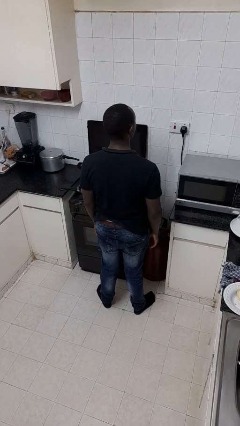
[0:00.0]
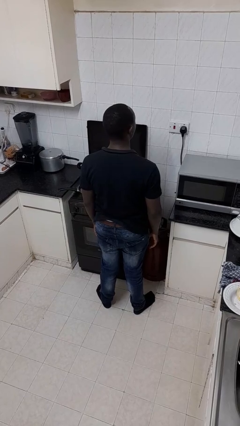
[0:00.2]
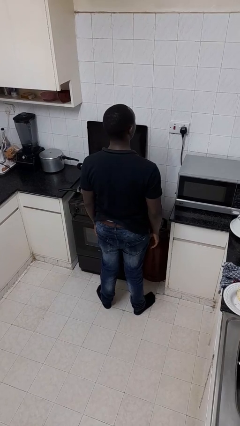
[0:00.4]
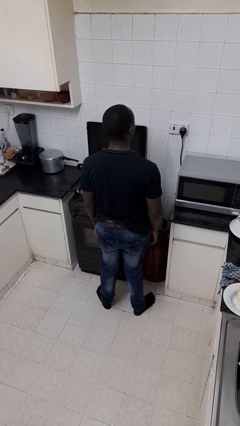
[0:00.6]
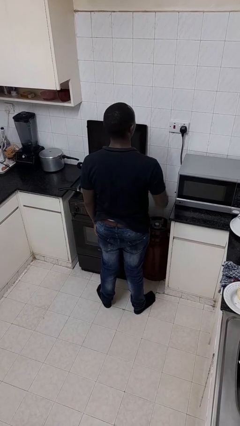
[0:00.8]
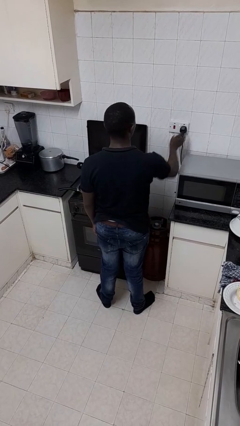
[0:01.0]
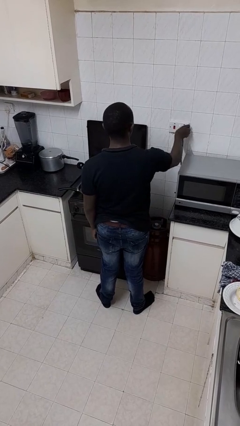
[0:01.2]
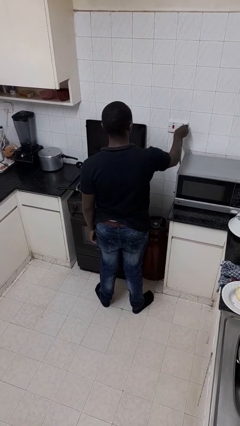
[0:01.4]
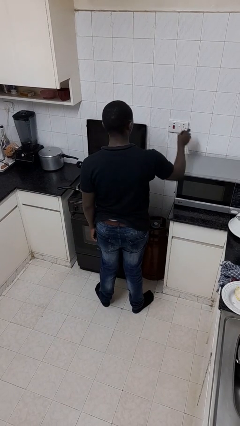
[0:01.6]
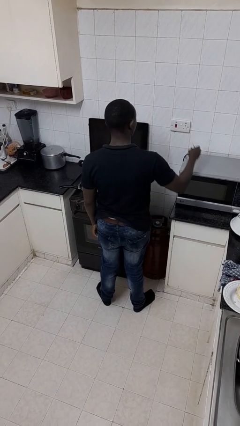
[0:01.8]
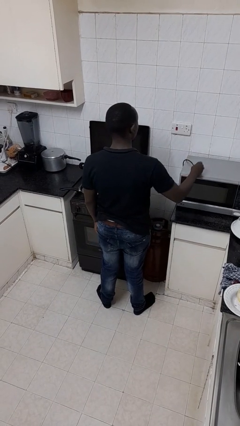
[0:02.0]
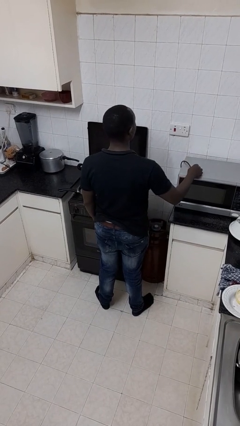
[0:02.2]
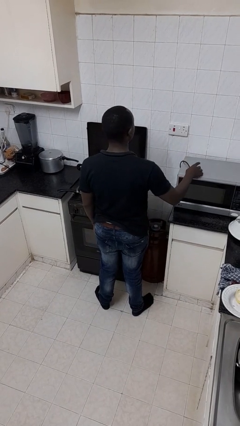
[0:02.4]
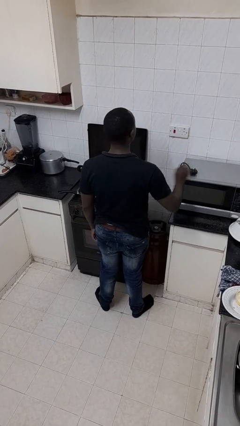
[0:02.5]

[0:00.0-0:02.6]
person unplugs from electrical socket

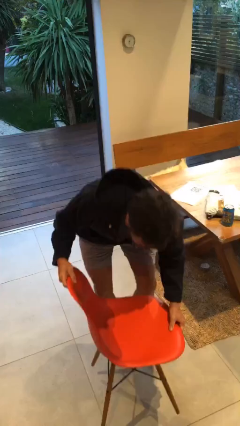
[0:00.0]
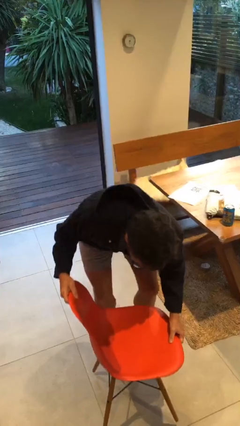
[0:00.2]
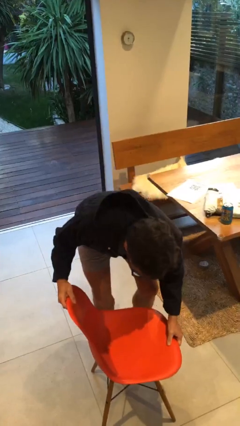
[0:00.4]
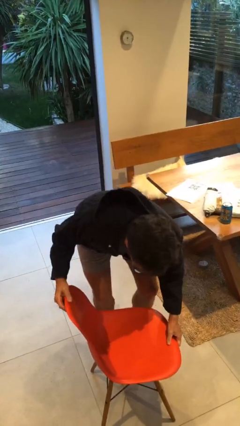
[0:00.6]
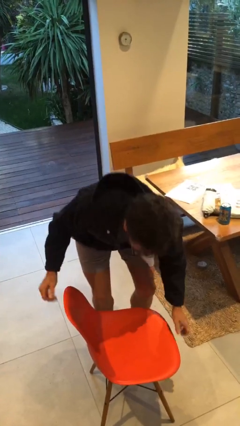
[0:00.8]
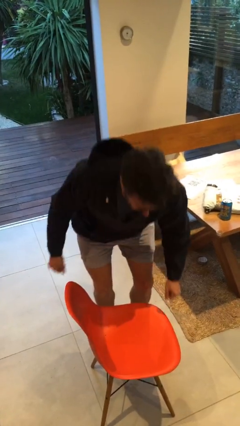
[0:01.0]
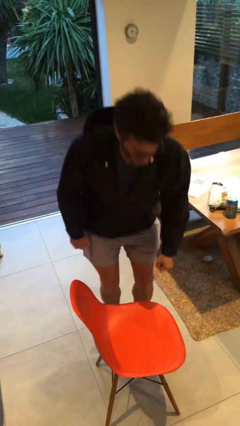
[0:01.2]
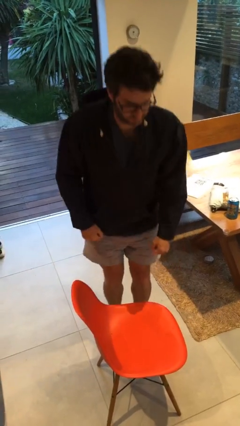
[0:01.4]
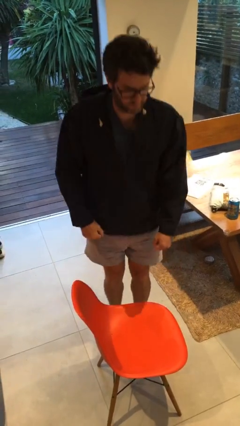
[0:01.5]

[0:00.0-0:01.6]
person puts down object on floor

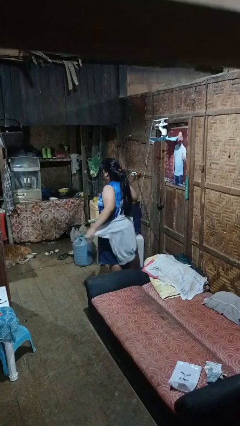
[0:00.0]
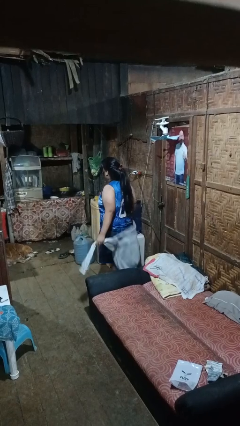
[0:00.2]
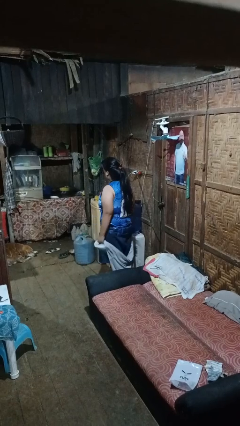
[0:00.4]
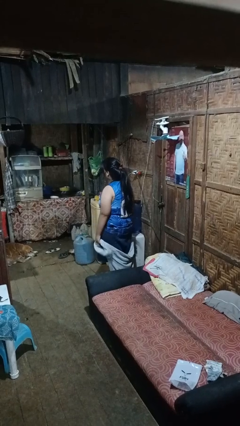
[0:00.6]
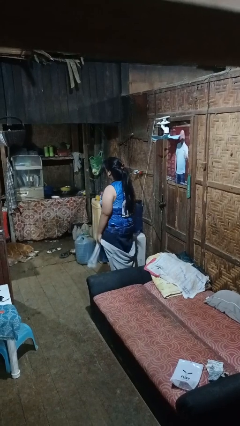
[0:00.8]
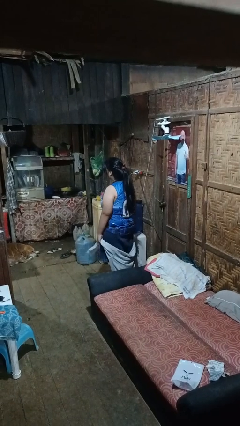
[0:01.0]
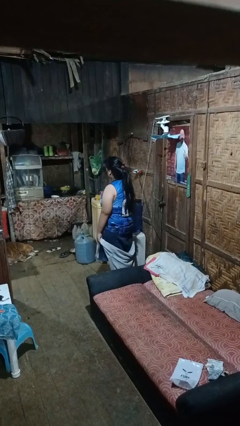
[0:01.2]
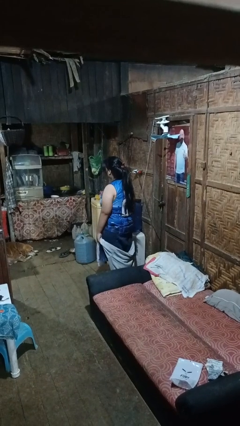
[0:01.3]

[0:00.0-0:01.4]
person unties jacket around waist

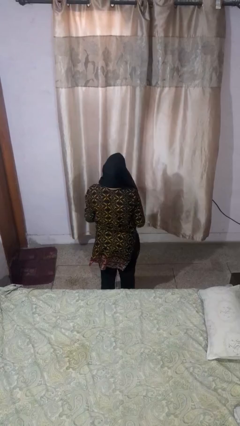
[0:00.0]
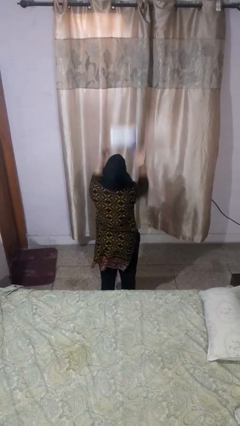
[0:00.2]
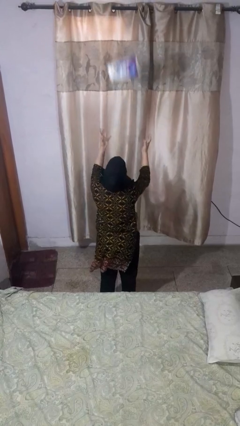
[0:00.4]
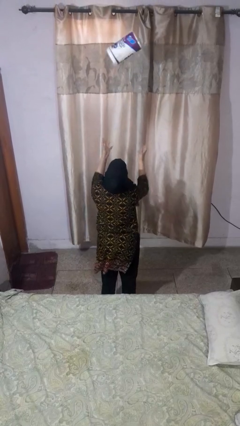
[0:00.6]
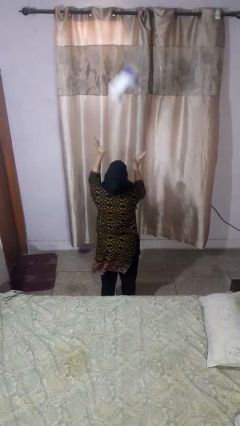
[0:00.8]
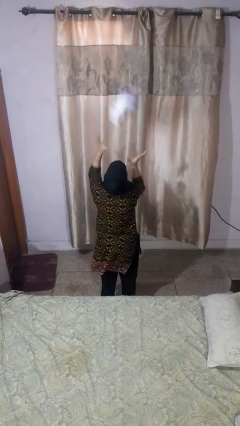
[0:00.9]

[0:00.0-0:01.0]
person drops object

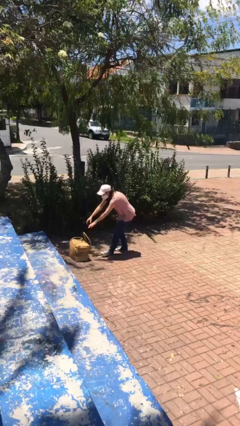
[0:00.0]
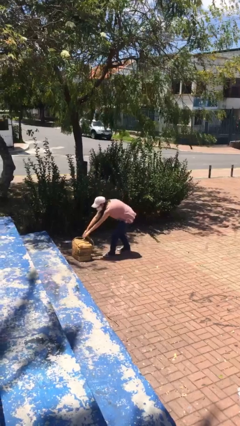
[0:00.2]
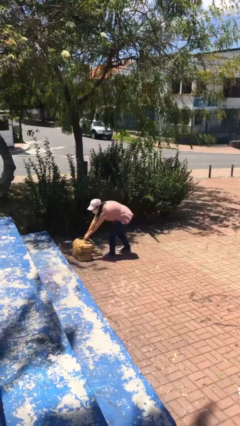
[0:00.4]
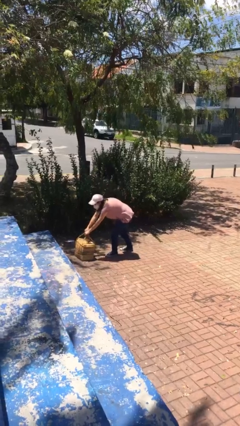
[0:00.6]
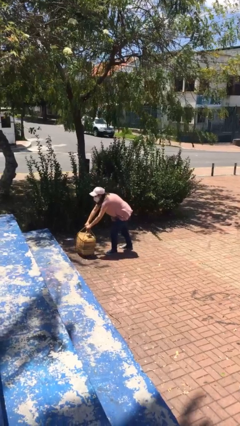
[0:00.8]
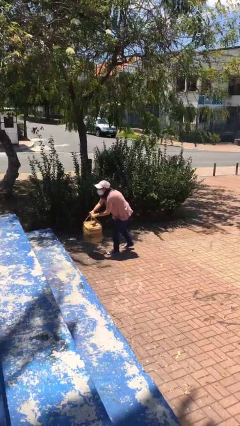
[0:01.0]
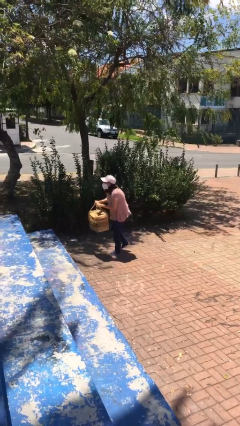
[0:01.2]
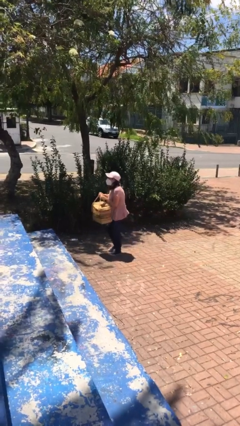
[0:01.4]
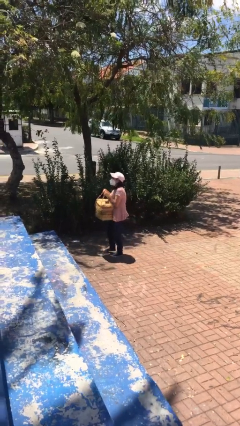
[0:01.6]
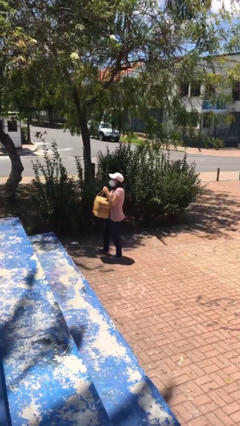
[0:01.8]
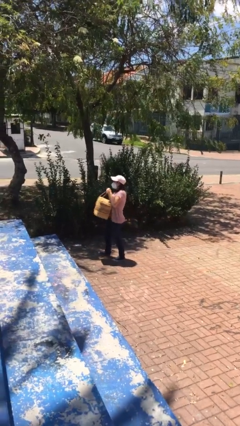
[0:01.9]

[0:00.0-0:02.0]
person picks up object from floor

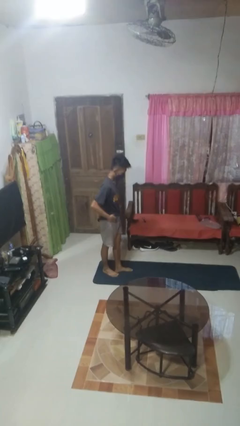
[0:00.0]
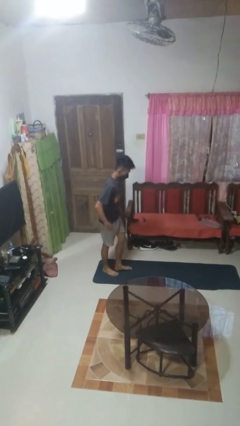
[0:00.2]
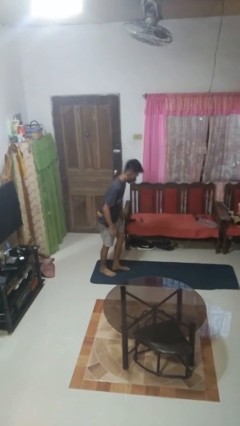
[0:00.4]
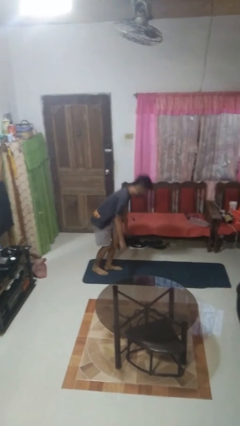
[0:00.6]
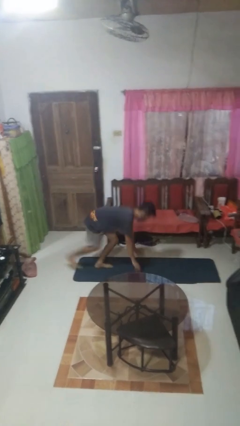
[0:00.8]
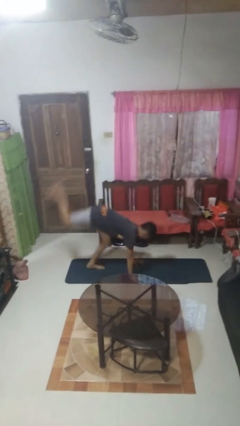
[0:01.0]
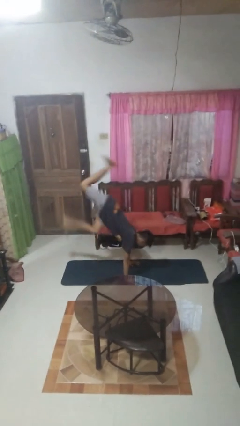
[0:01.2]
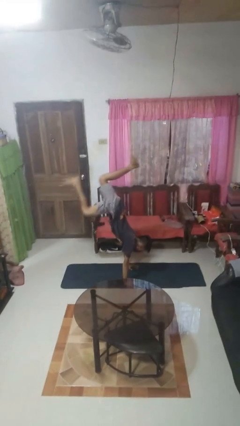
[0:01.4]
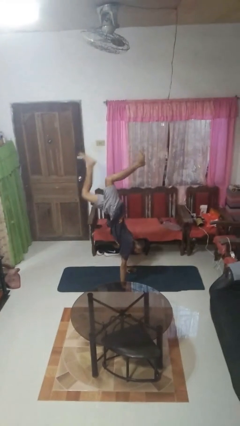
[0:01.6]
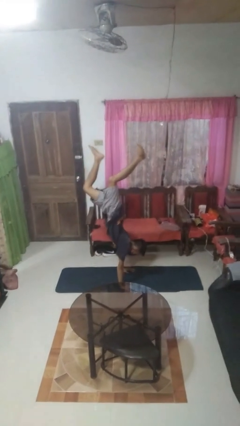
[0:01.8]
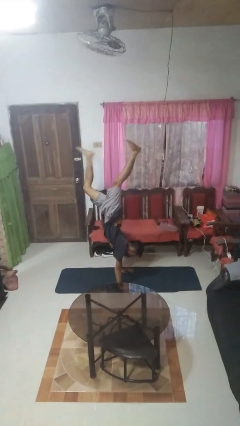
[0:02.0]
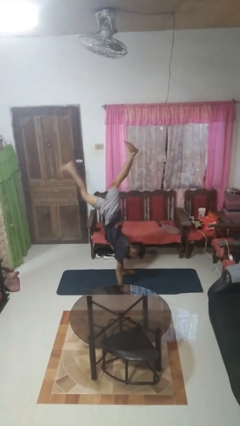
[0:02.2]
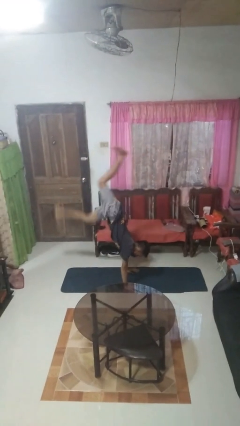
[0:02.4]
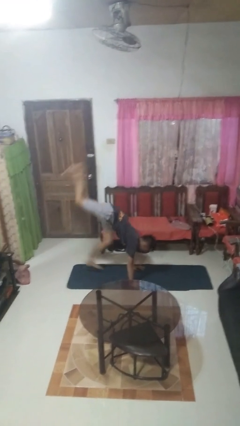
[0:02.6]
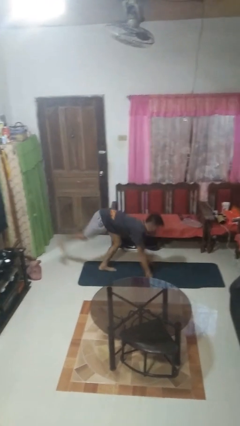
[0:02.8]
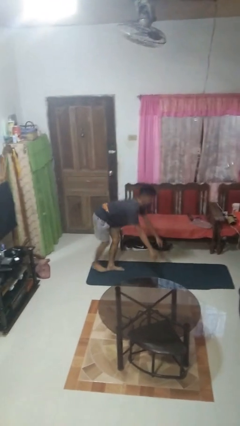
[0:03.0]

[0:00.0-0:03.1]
person handstand

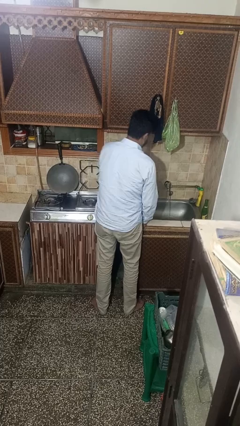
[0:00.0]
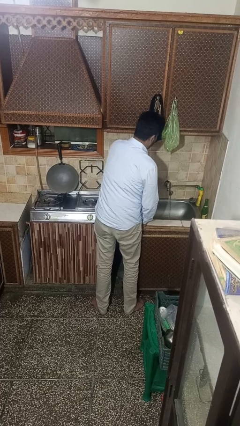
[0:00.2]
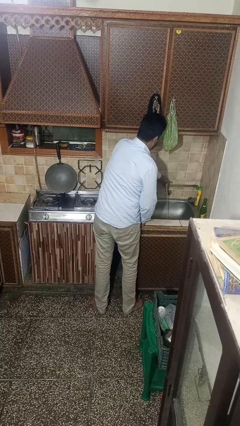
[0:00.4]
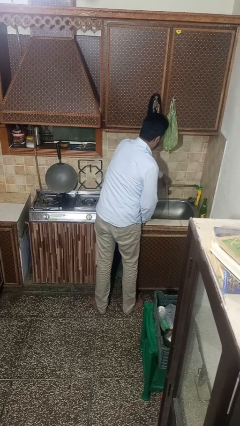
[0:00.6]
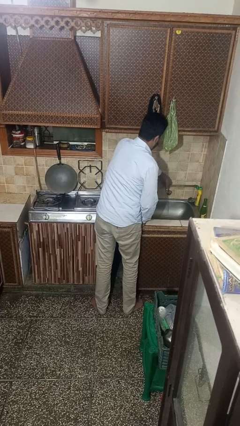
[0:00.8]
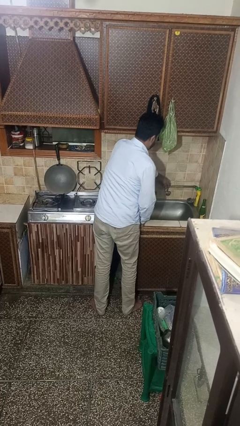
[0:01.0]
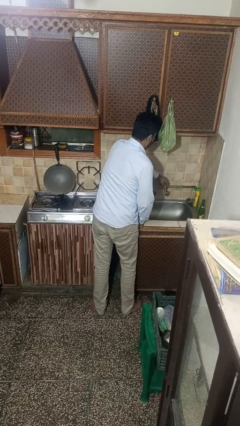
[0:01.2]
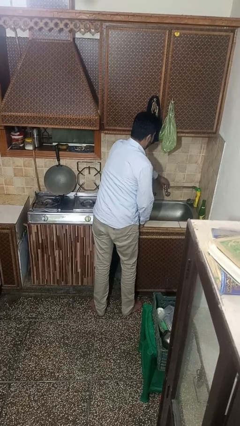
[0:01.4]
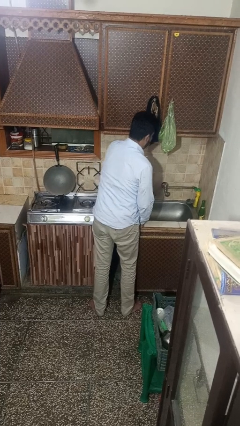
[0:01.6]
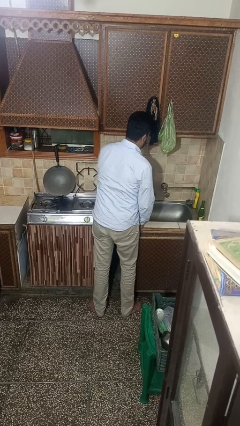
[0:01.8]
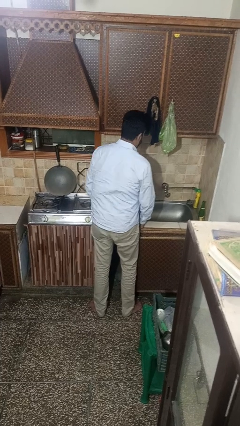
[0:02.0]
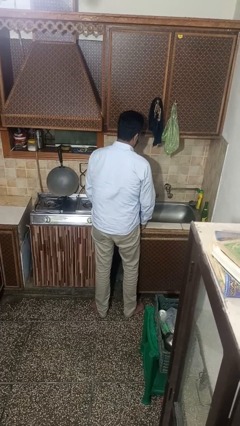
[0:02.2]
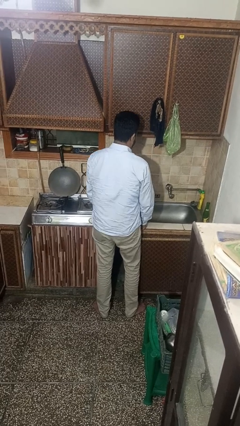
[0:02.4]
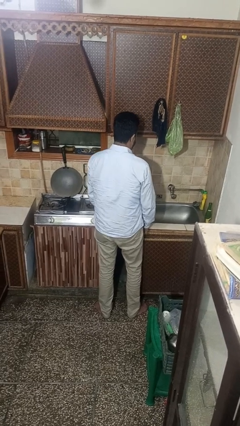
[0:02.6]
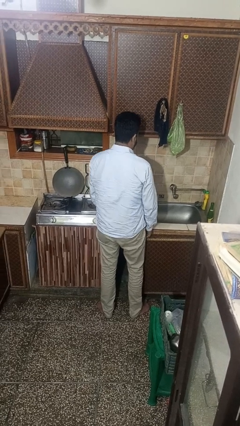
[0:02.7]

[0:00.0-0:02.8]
person turns off faucet

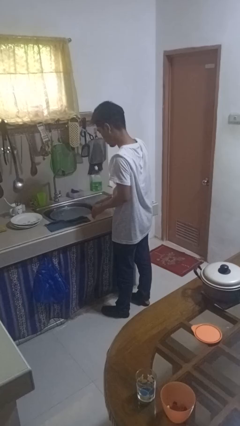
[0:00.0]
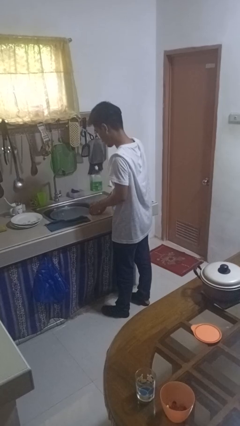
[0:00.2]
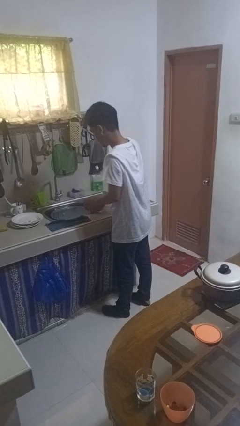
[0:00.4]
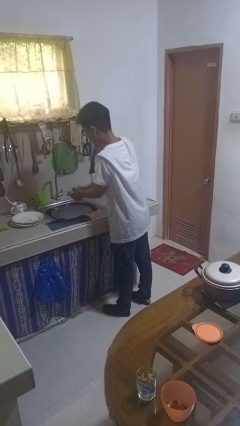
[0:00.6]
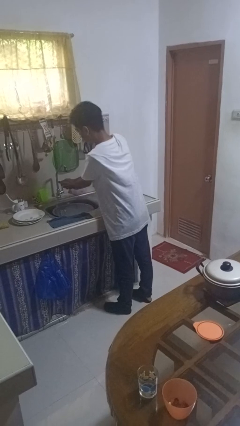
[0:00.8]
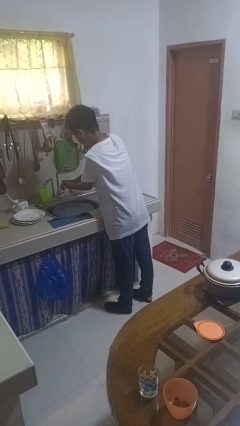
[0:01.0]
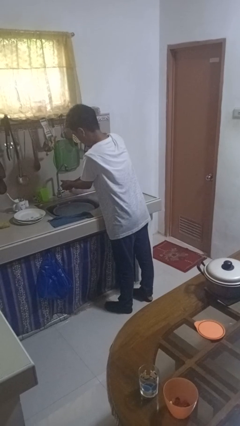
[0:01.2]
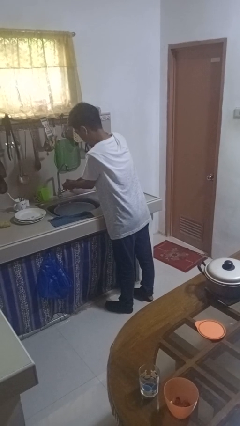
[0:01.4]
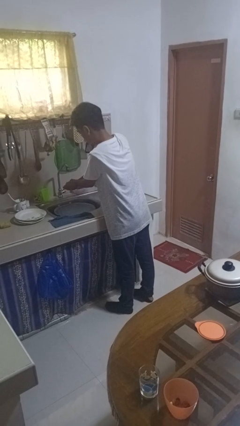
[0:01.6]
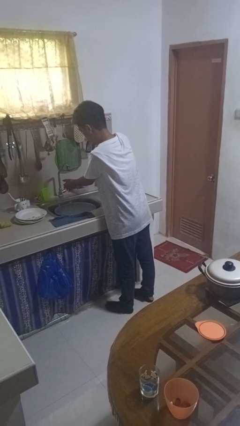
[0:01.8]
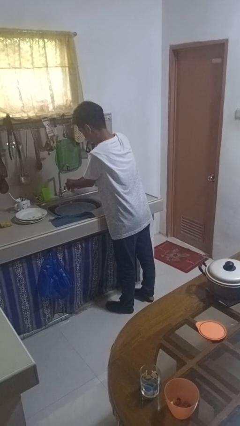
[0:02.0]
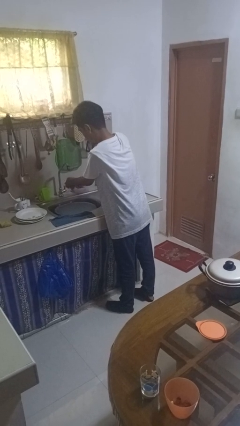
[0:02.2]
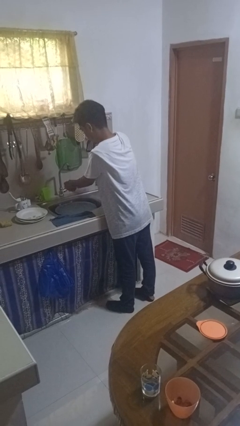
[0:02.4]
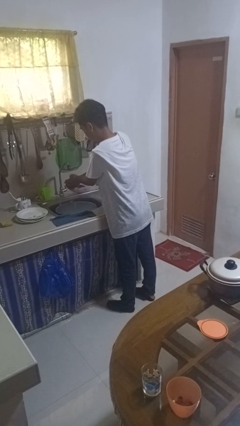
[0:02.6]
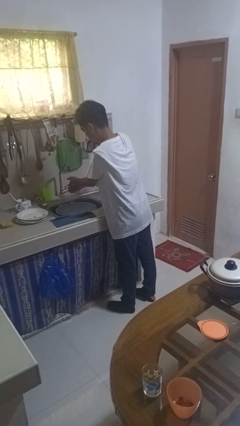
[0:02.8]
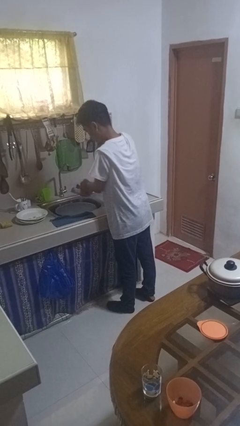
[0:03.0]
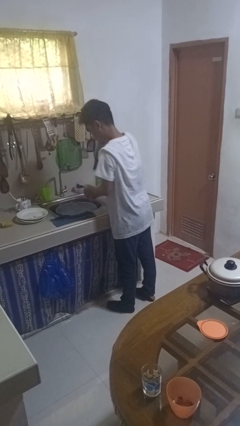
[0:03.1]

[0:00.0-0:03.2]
person washes hands
